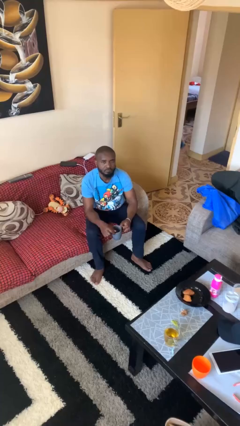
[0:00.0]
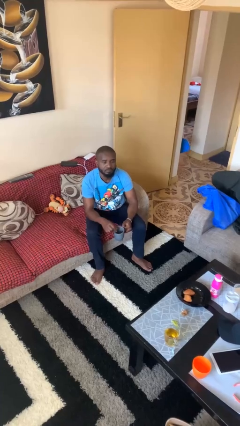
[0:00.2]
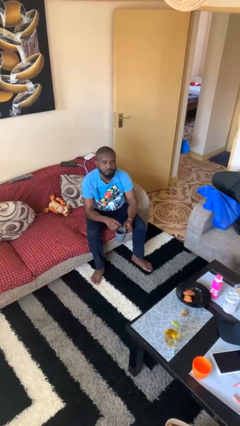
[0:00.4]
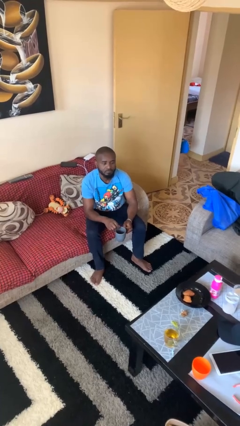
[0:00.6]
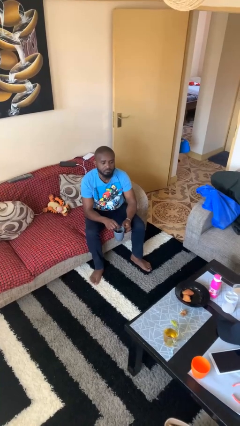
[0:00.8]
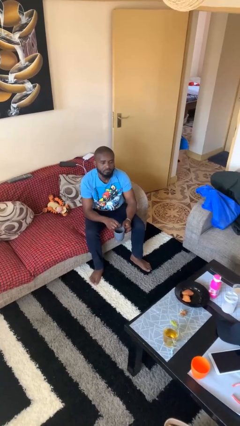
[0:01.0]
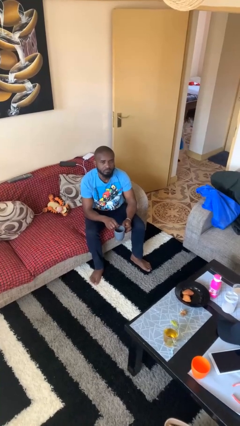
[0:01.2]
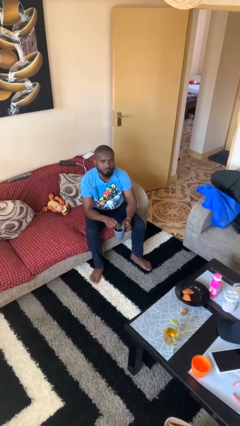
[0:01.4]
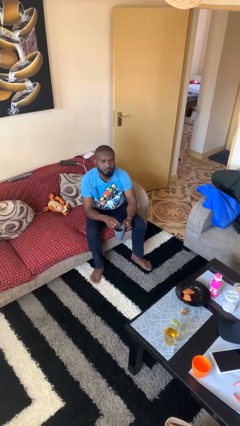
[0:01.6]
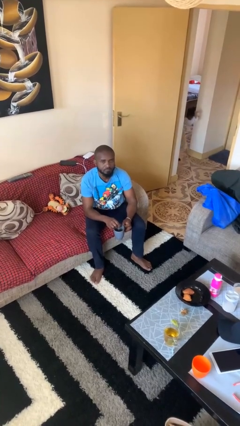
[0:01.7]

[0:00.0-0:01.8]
person stirs mug

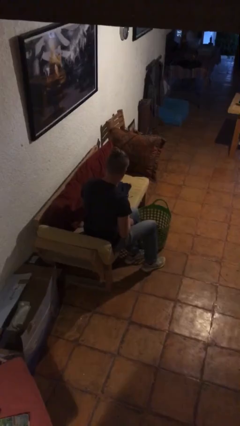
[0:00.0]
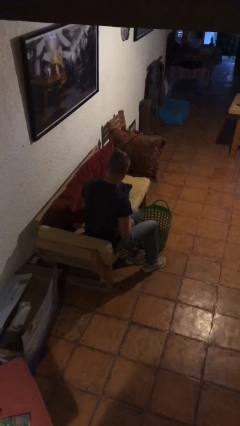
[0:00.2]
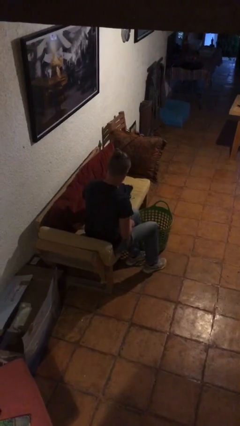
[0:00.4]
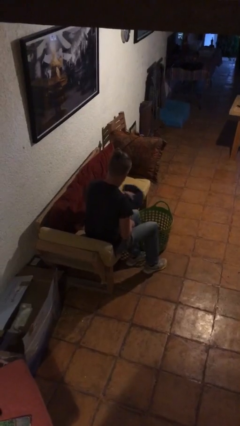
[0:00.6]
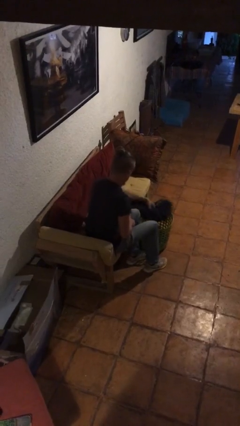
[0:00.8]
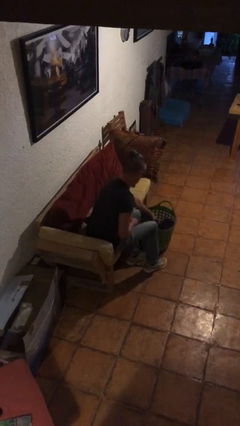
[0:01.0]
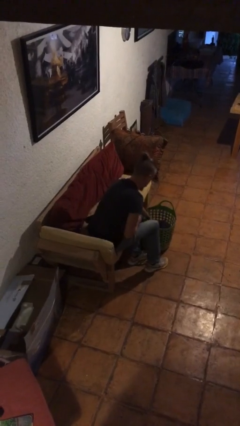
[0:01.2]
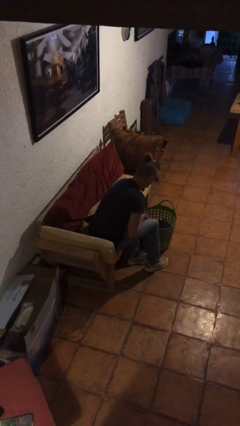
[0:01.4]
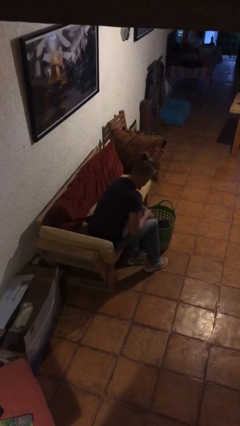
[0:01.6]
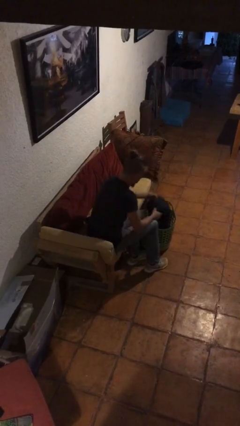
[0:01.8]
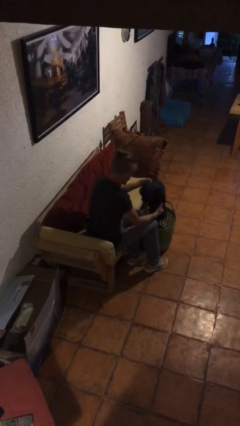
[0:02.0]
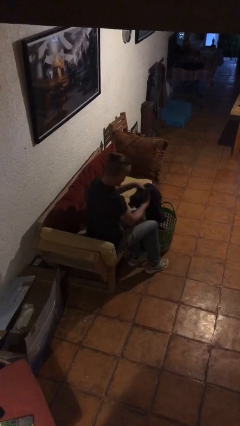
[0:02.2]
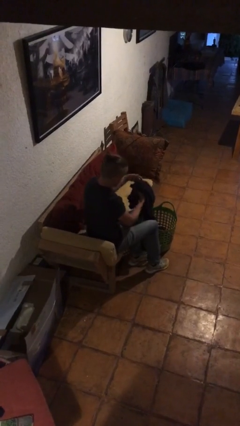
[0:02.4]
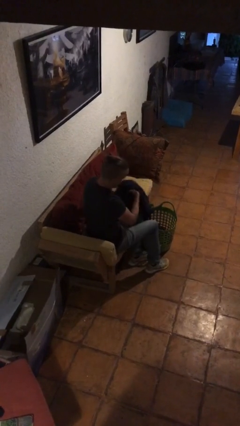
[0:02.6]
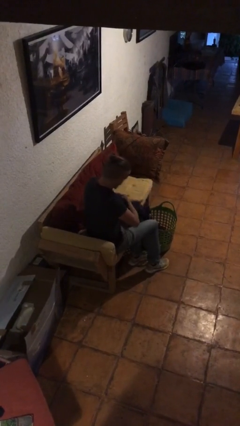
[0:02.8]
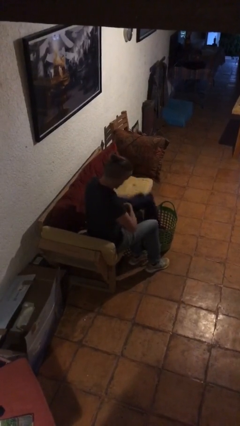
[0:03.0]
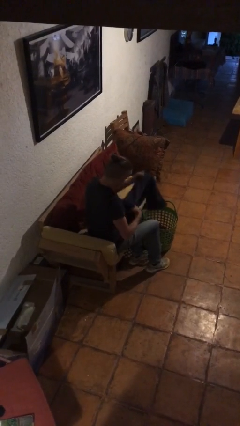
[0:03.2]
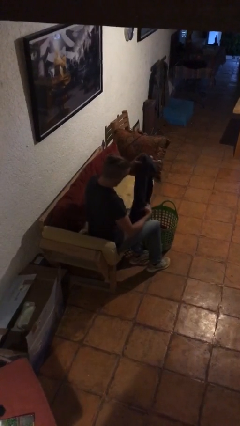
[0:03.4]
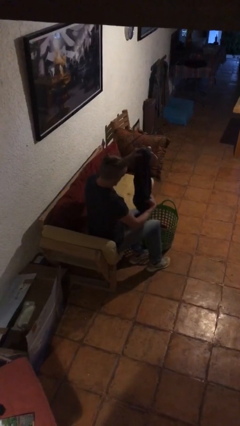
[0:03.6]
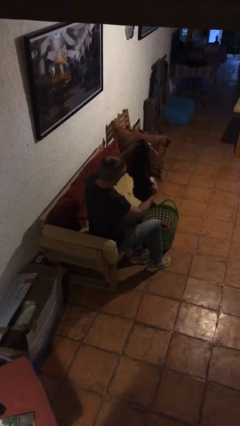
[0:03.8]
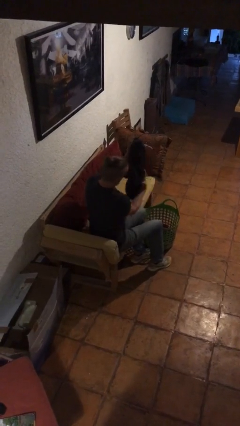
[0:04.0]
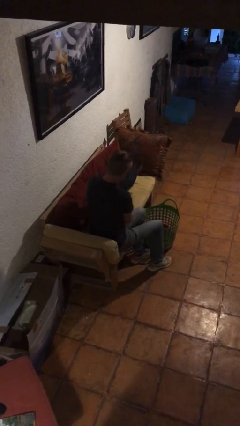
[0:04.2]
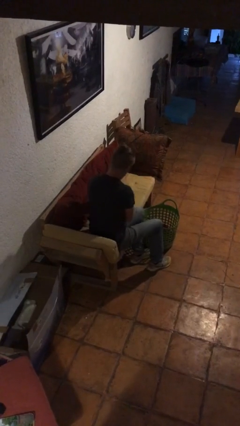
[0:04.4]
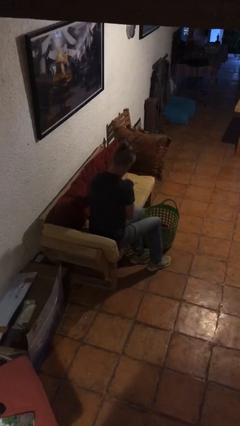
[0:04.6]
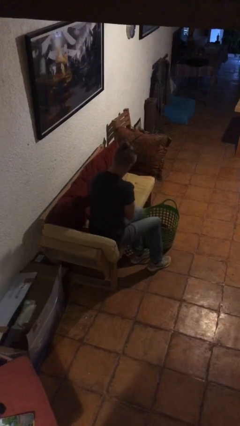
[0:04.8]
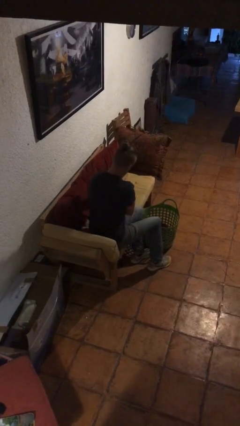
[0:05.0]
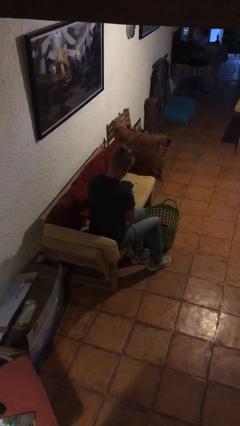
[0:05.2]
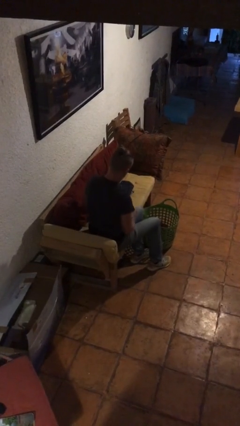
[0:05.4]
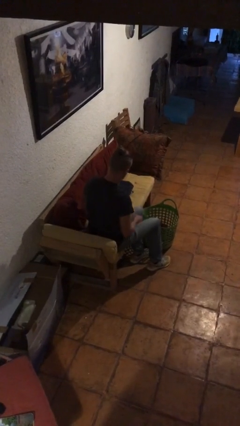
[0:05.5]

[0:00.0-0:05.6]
person folds pants

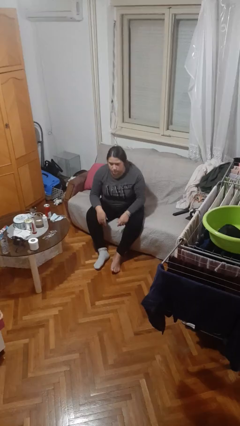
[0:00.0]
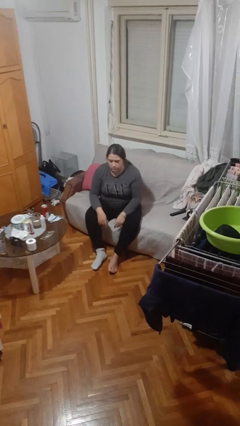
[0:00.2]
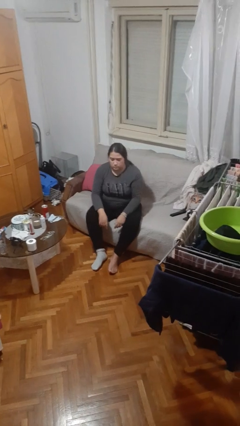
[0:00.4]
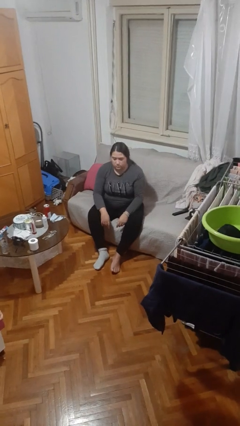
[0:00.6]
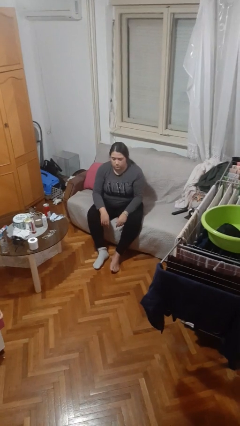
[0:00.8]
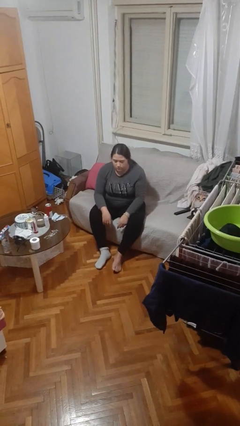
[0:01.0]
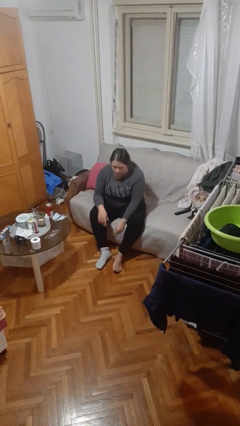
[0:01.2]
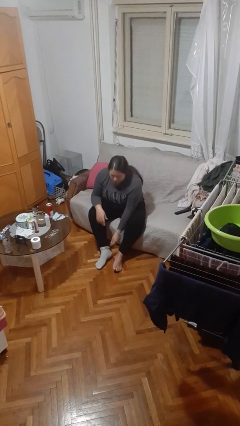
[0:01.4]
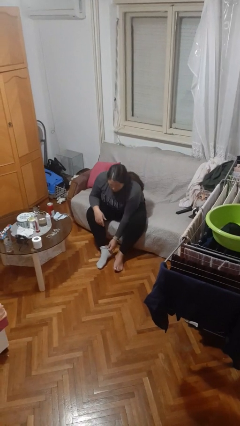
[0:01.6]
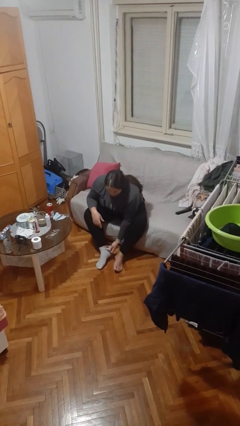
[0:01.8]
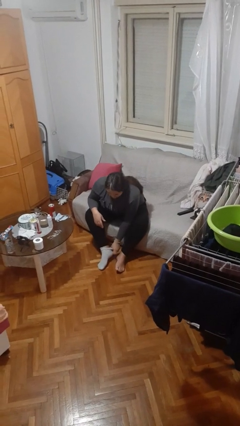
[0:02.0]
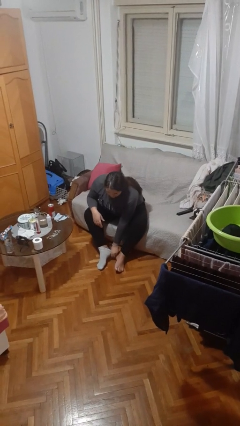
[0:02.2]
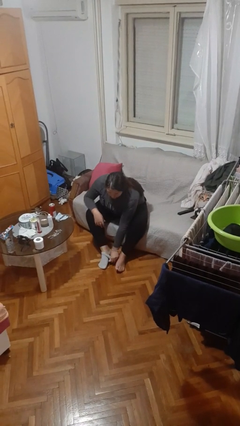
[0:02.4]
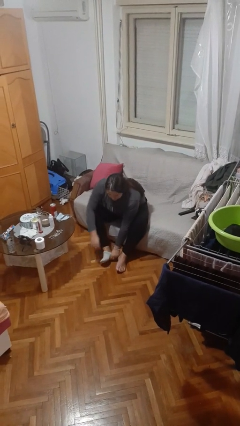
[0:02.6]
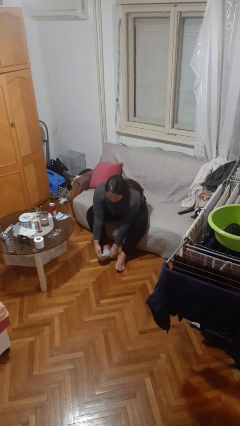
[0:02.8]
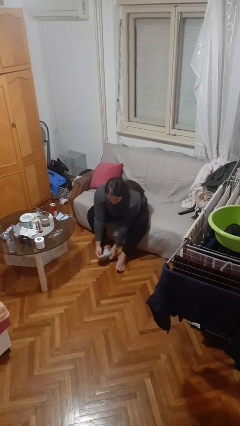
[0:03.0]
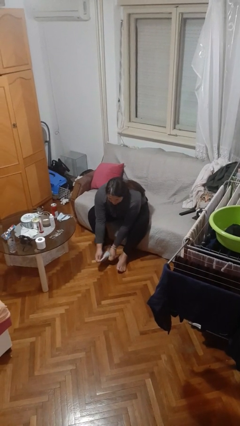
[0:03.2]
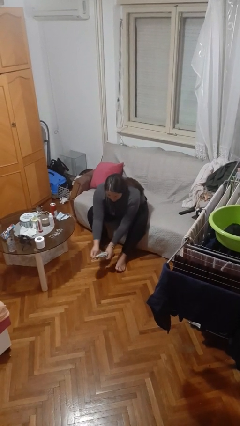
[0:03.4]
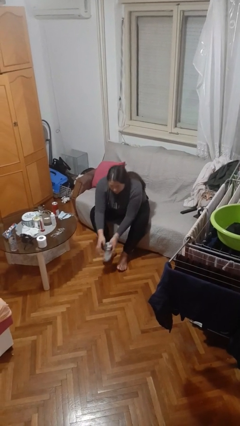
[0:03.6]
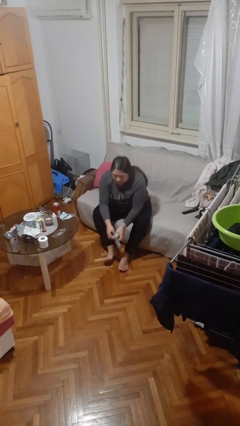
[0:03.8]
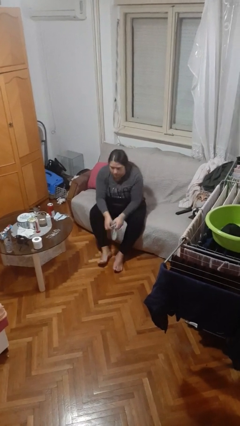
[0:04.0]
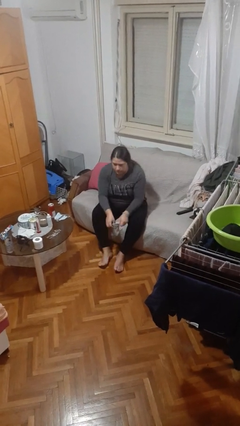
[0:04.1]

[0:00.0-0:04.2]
person takes off socks

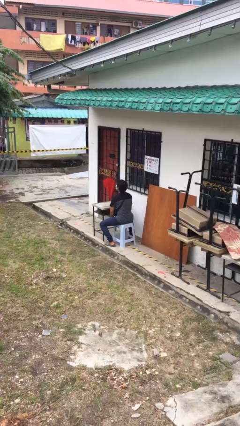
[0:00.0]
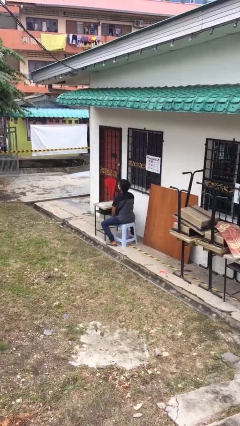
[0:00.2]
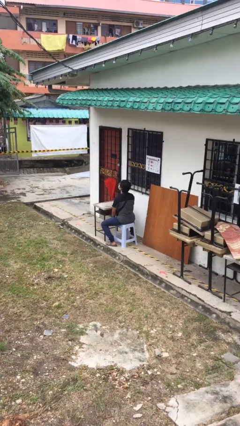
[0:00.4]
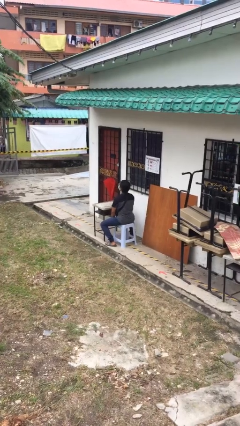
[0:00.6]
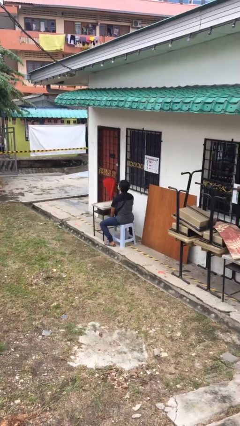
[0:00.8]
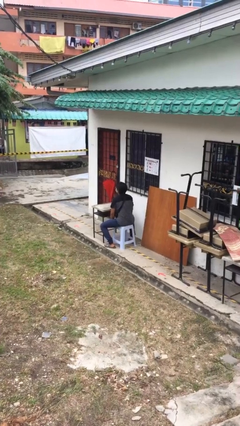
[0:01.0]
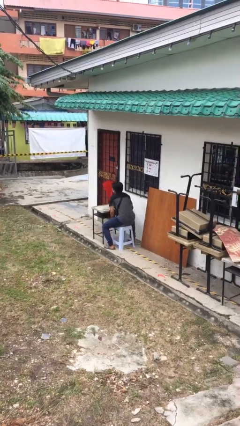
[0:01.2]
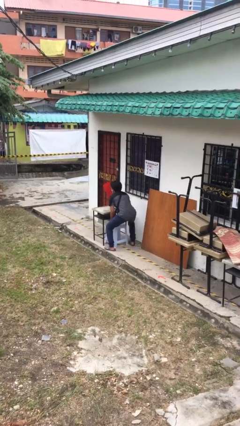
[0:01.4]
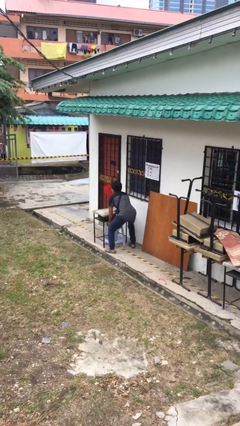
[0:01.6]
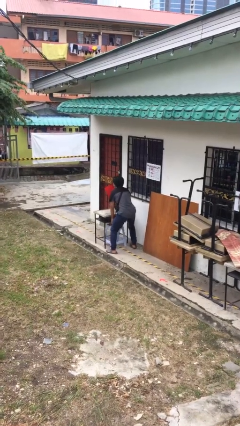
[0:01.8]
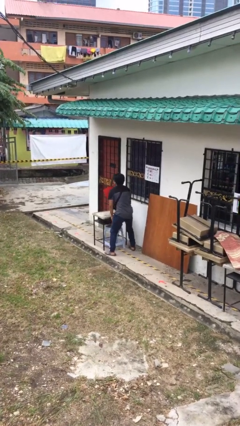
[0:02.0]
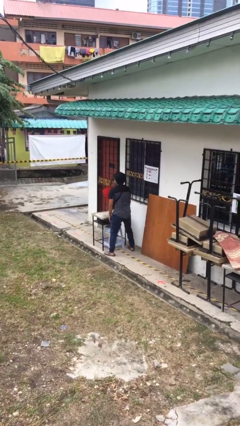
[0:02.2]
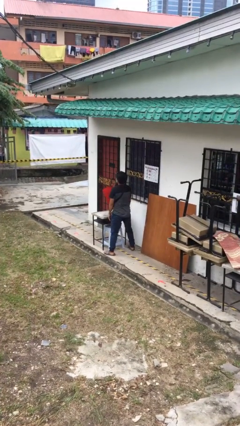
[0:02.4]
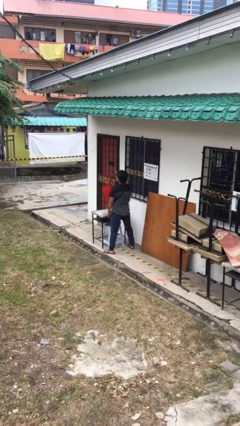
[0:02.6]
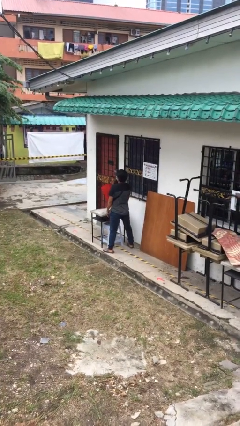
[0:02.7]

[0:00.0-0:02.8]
person stands up

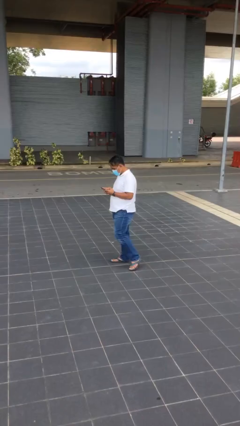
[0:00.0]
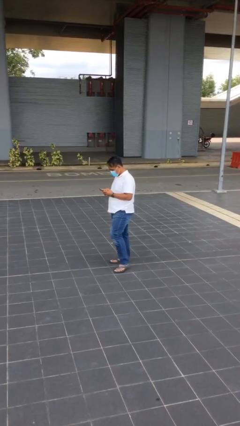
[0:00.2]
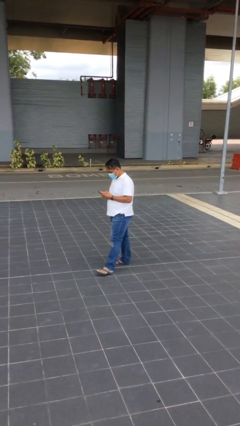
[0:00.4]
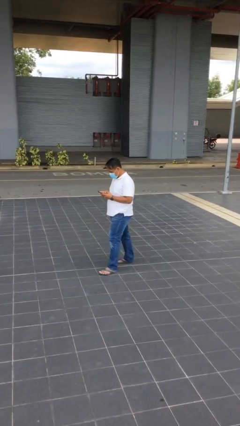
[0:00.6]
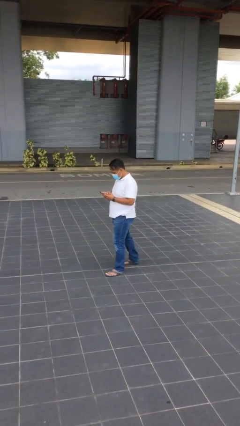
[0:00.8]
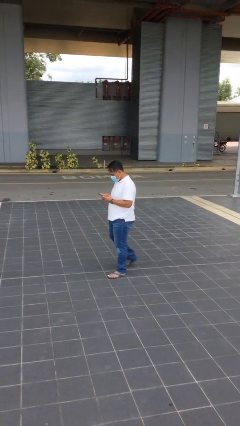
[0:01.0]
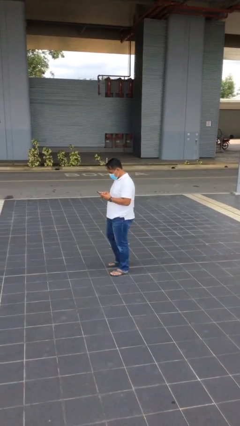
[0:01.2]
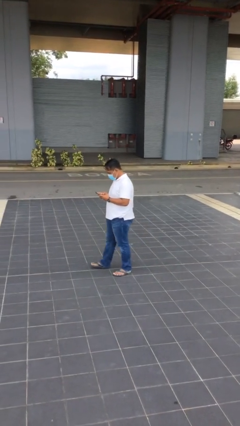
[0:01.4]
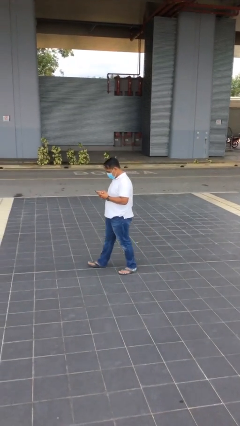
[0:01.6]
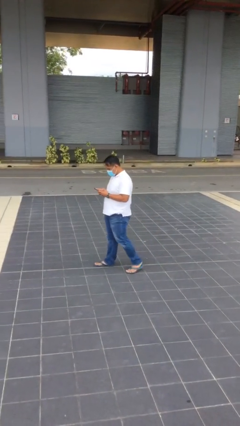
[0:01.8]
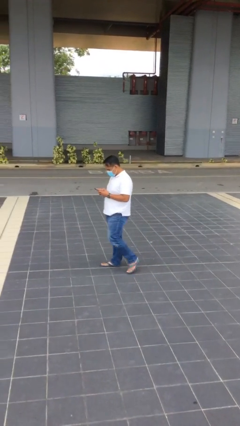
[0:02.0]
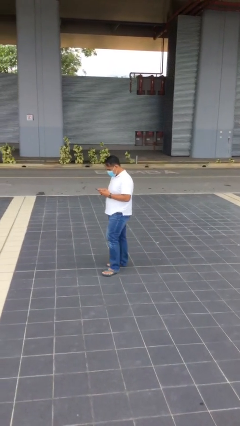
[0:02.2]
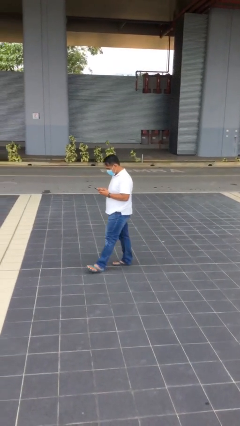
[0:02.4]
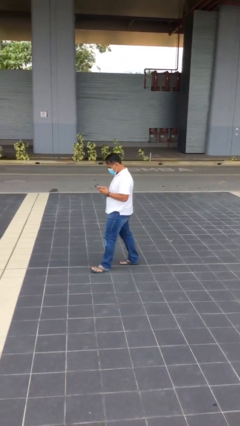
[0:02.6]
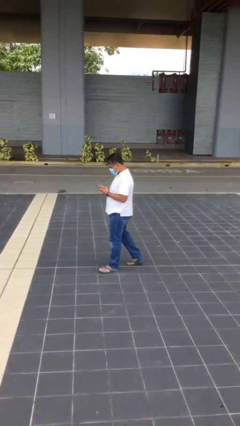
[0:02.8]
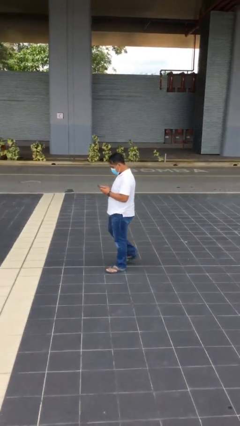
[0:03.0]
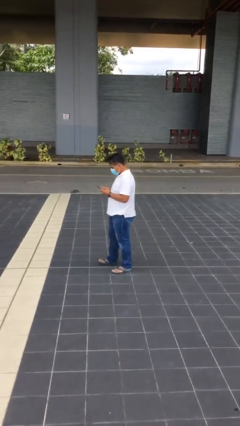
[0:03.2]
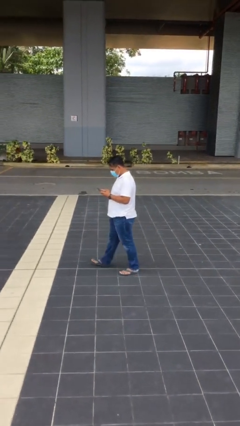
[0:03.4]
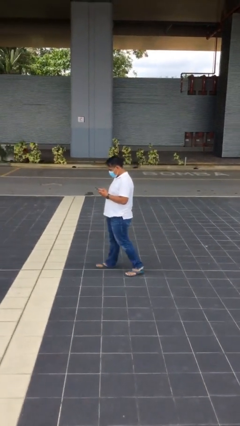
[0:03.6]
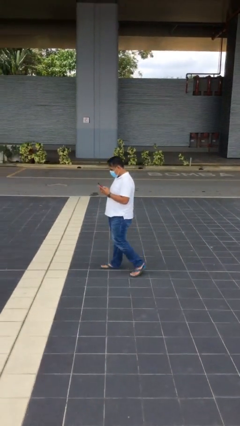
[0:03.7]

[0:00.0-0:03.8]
person texts on phone
